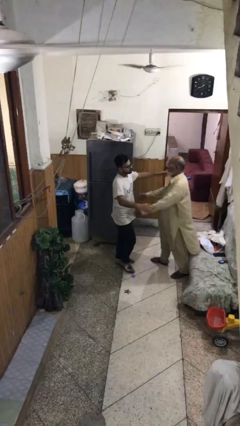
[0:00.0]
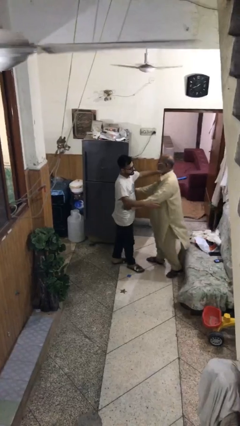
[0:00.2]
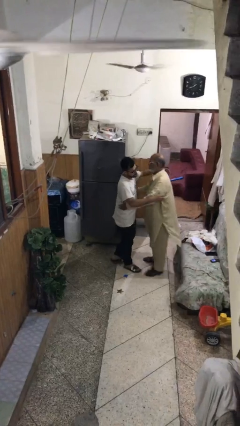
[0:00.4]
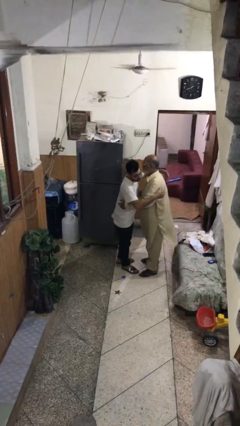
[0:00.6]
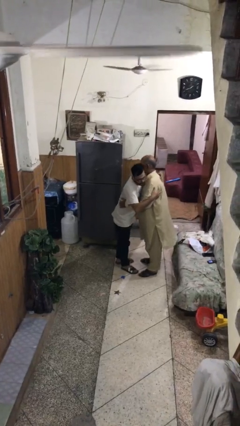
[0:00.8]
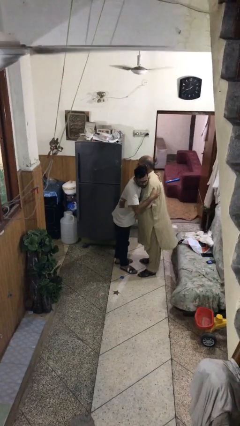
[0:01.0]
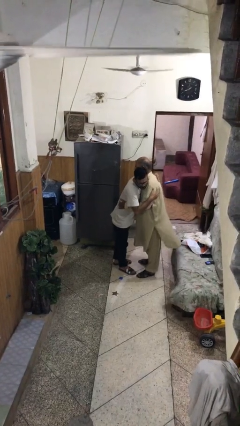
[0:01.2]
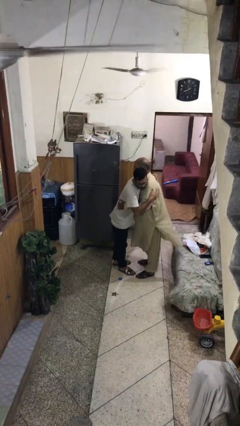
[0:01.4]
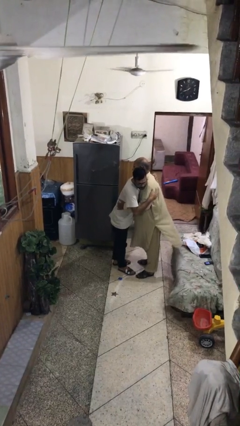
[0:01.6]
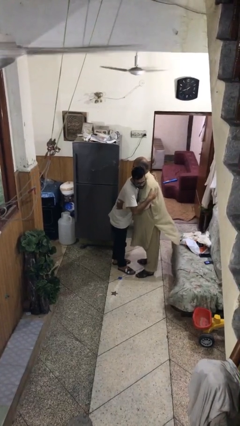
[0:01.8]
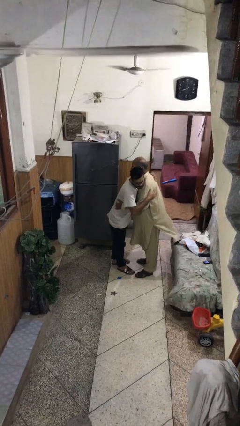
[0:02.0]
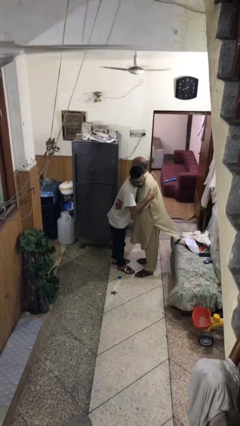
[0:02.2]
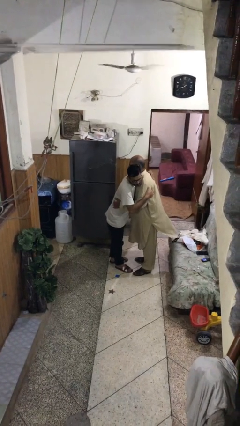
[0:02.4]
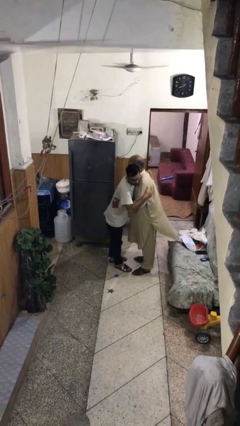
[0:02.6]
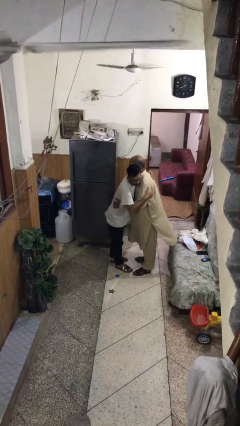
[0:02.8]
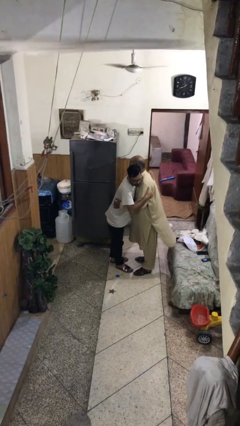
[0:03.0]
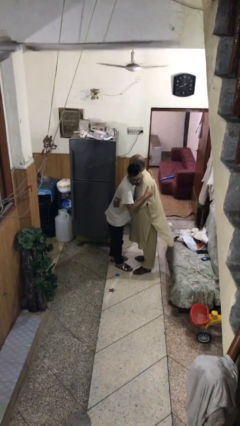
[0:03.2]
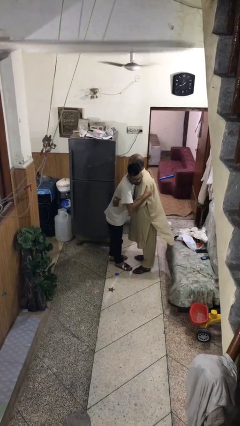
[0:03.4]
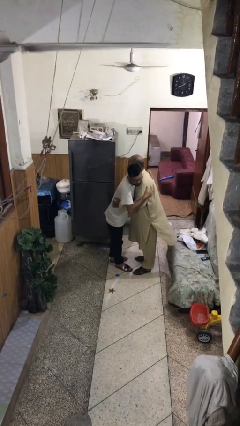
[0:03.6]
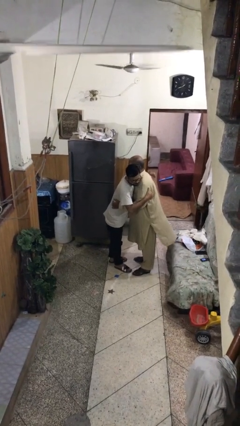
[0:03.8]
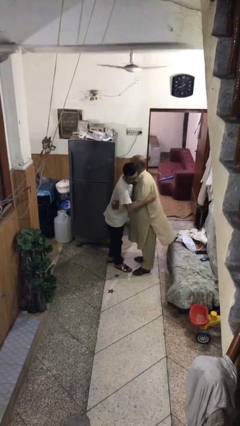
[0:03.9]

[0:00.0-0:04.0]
person embraces person

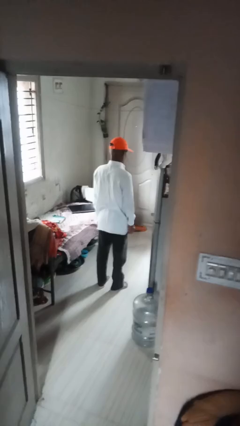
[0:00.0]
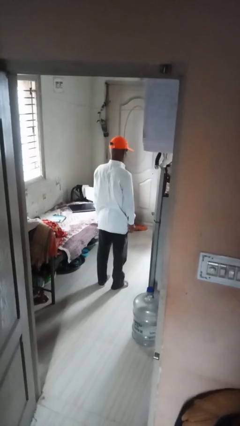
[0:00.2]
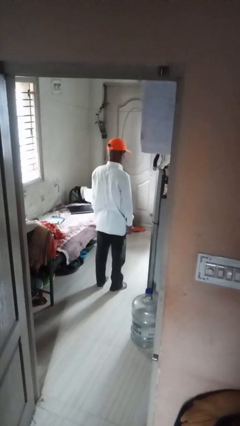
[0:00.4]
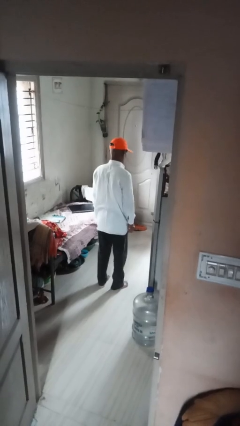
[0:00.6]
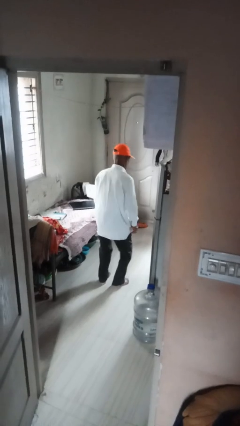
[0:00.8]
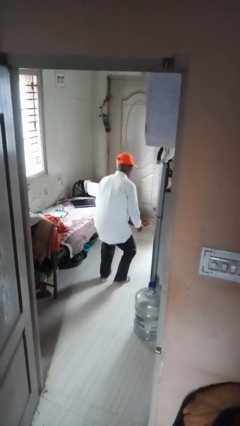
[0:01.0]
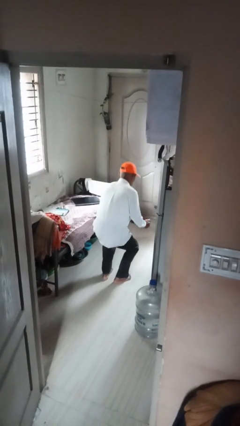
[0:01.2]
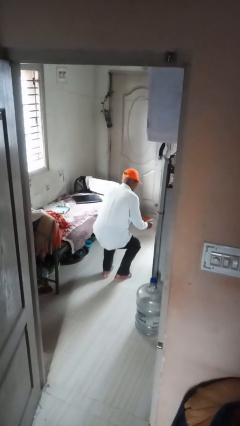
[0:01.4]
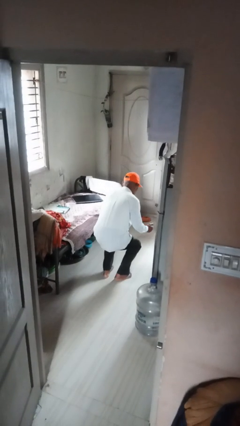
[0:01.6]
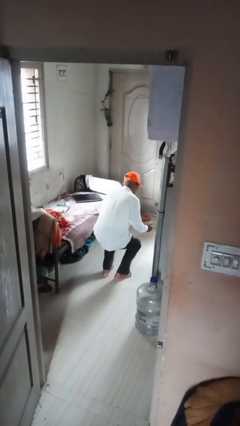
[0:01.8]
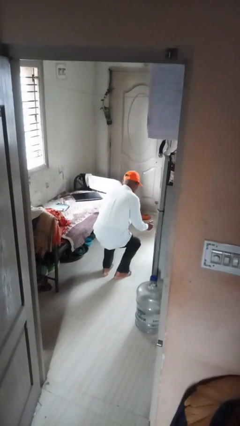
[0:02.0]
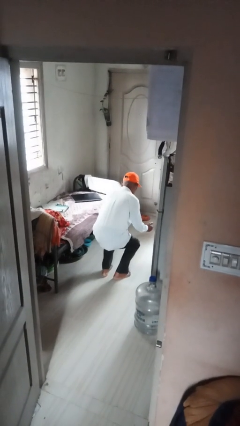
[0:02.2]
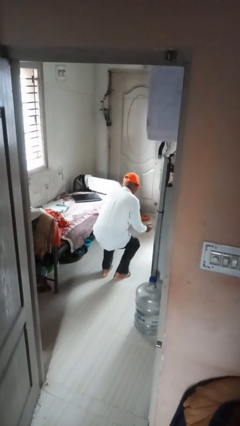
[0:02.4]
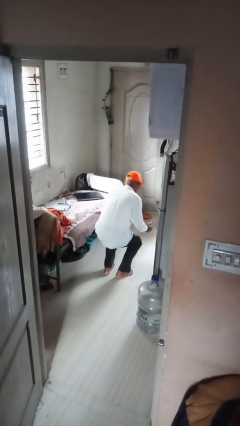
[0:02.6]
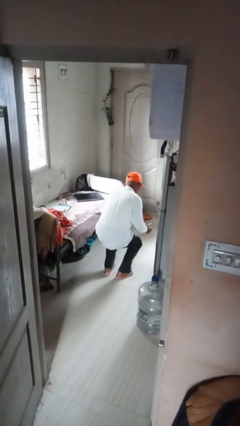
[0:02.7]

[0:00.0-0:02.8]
person squats

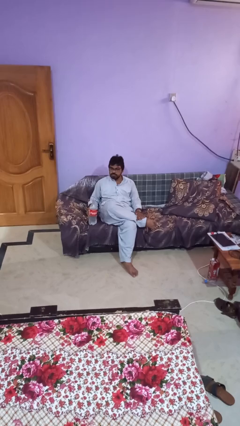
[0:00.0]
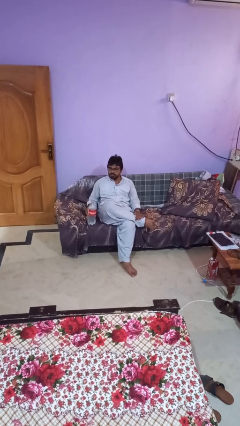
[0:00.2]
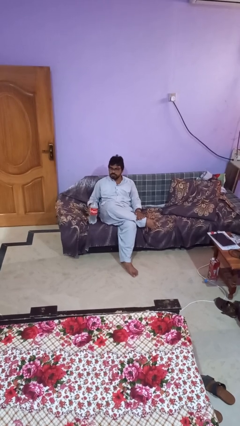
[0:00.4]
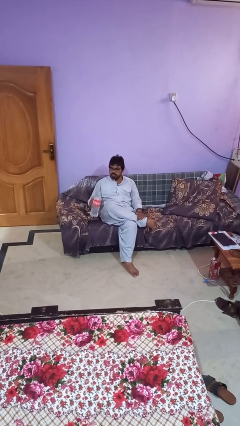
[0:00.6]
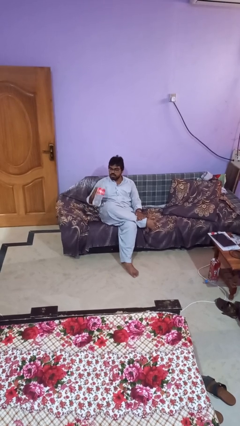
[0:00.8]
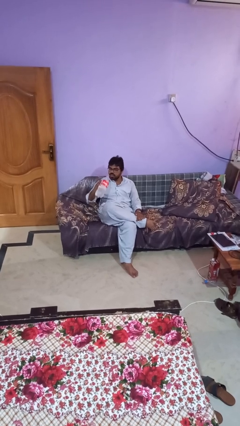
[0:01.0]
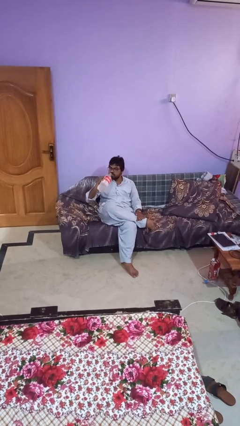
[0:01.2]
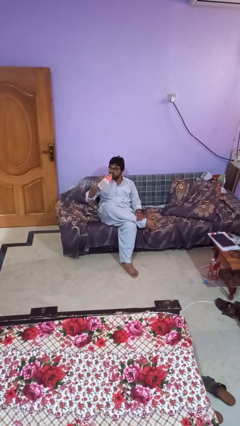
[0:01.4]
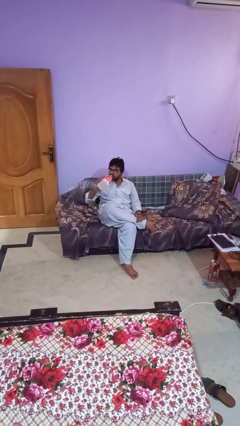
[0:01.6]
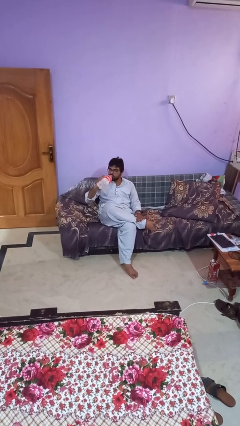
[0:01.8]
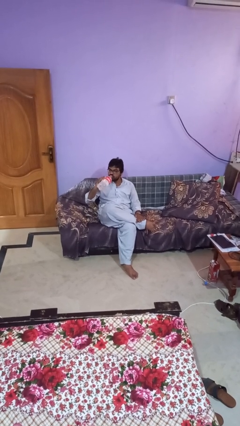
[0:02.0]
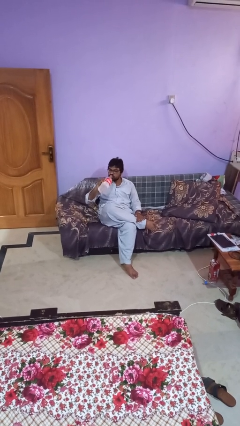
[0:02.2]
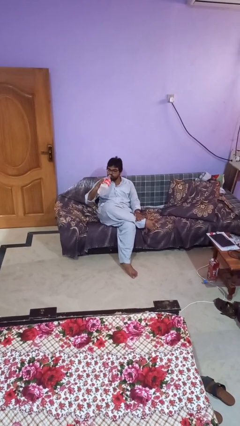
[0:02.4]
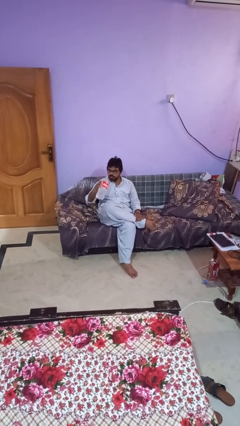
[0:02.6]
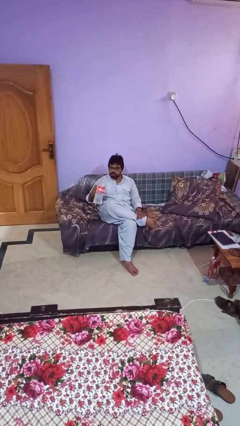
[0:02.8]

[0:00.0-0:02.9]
person drinks from bottle

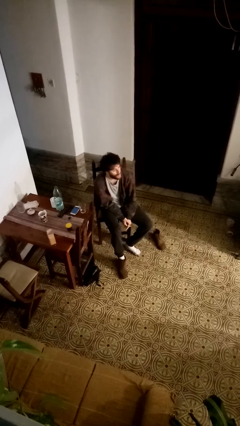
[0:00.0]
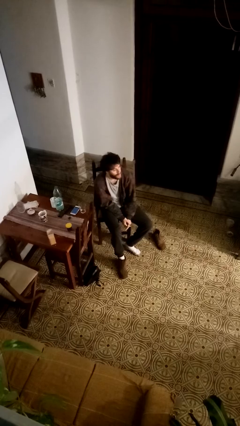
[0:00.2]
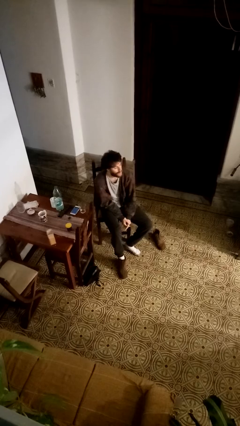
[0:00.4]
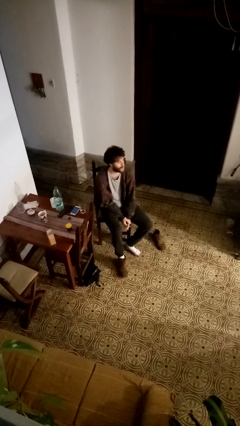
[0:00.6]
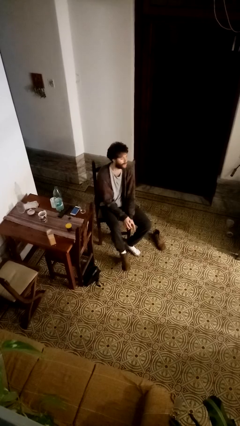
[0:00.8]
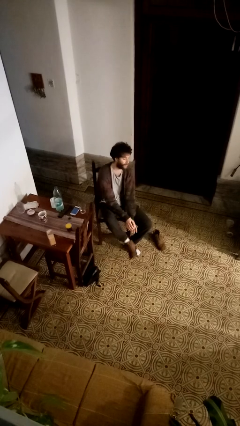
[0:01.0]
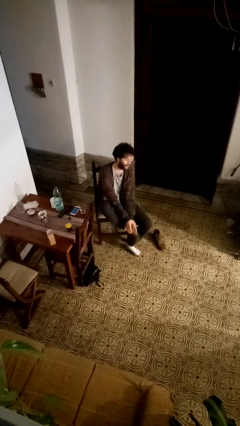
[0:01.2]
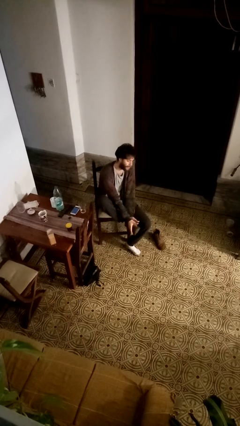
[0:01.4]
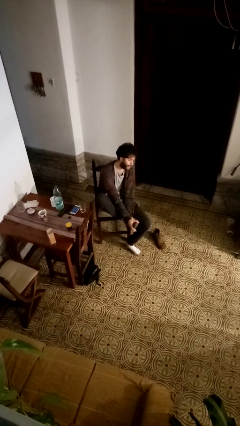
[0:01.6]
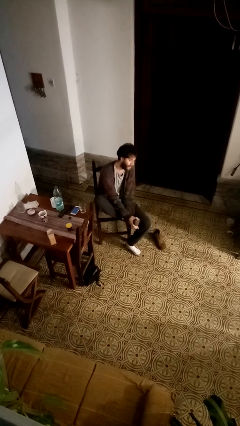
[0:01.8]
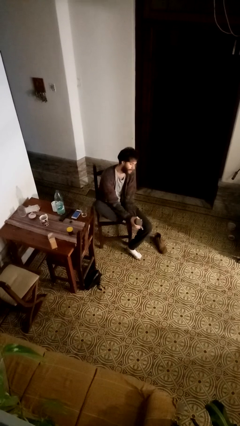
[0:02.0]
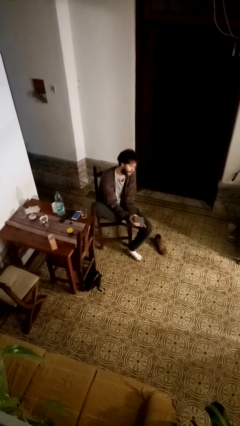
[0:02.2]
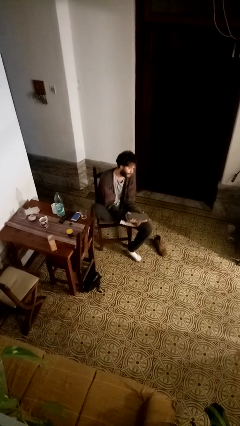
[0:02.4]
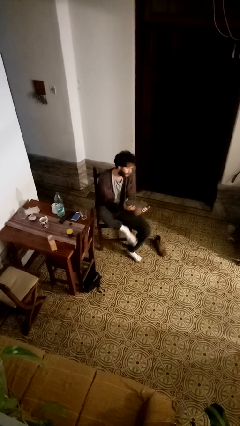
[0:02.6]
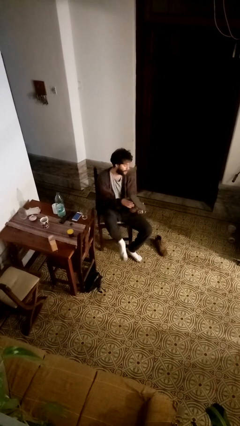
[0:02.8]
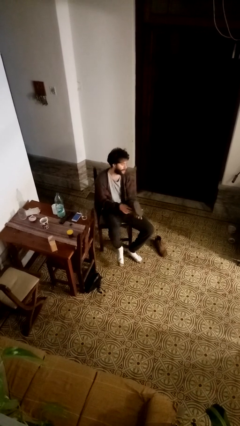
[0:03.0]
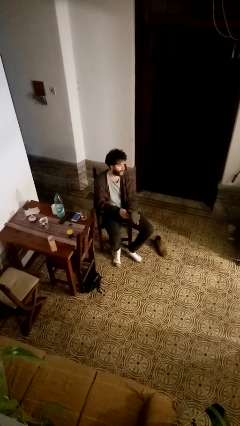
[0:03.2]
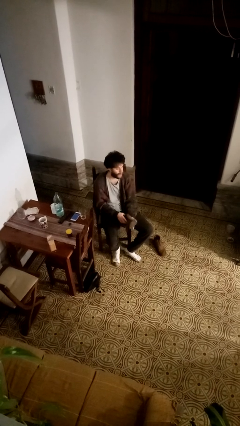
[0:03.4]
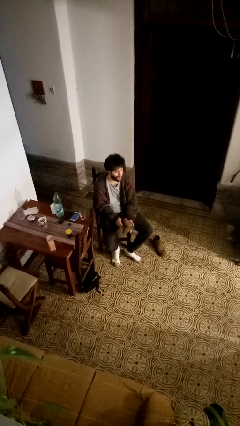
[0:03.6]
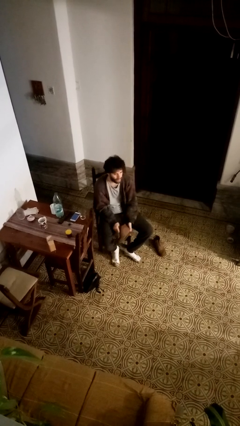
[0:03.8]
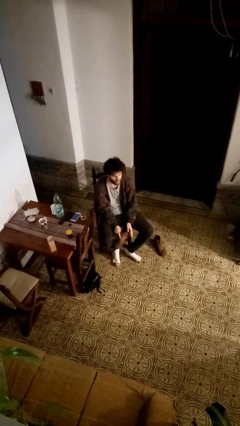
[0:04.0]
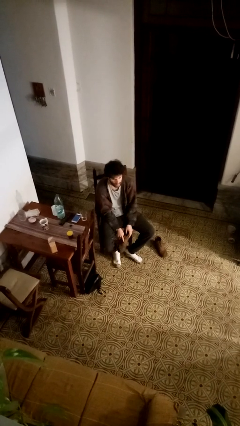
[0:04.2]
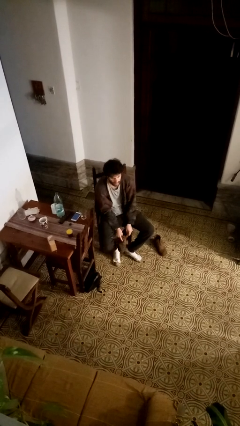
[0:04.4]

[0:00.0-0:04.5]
person takes off boots

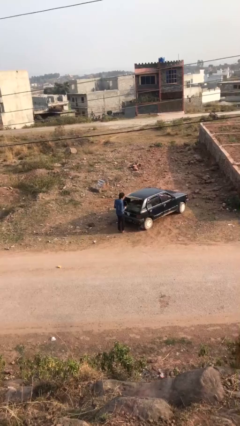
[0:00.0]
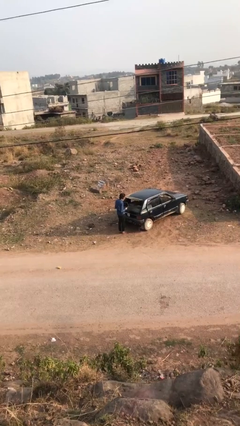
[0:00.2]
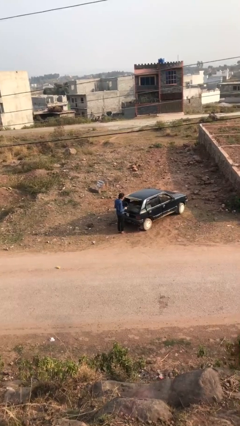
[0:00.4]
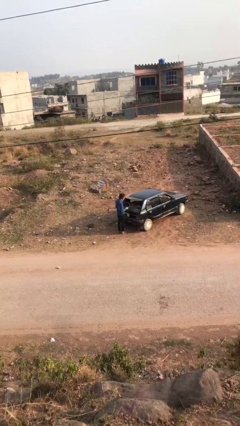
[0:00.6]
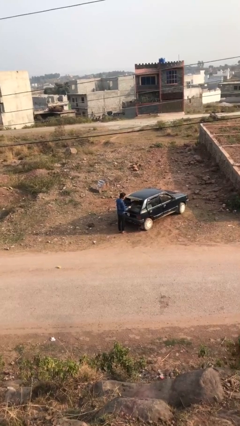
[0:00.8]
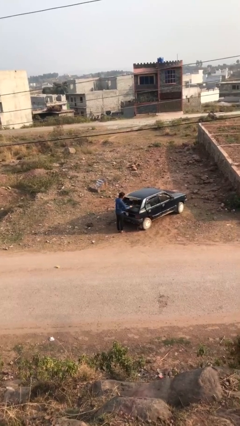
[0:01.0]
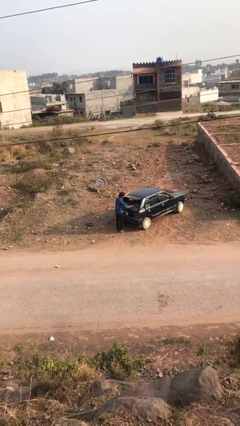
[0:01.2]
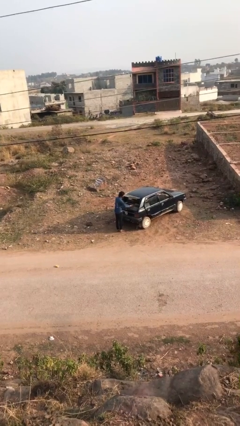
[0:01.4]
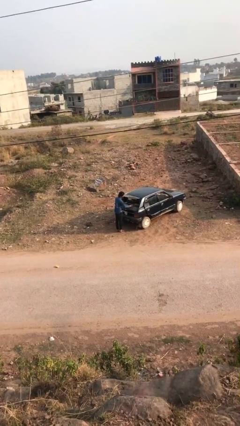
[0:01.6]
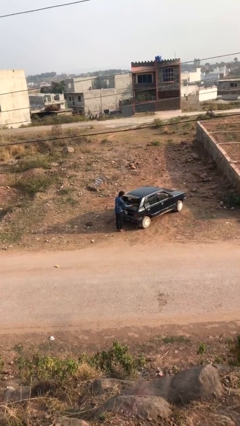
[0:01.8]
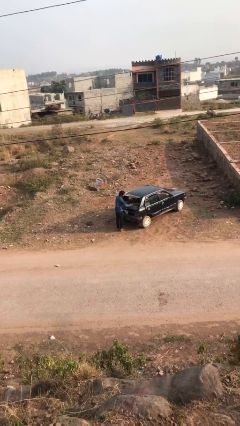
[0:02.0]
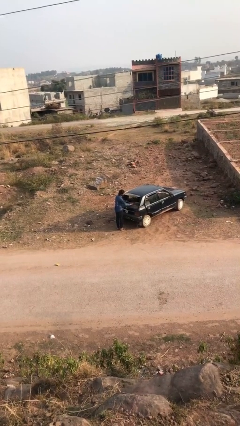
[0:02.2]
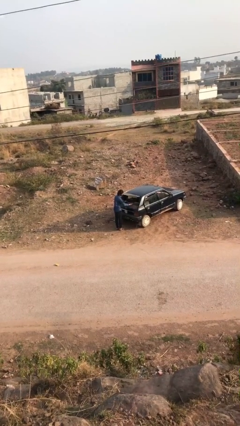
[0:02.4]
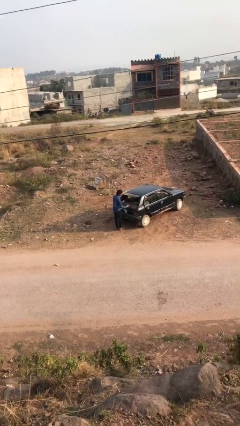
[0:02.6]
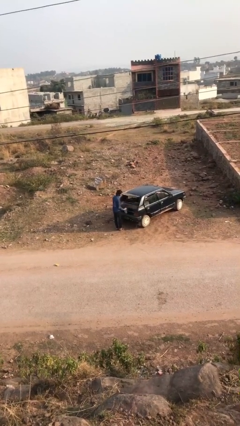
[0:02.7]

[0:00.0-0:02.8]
person loads car

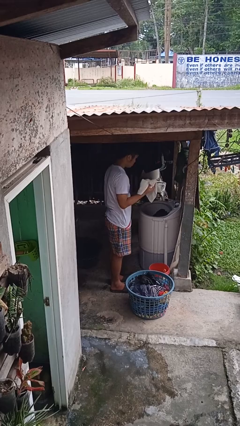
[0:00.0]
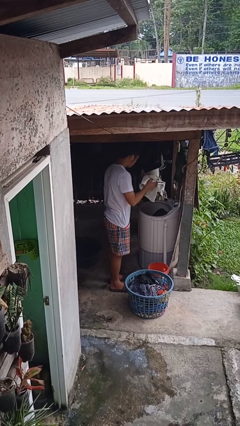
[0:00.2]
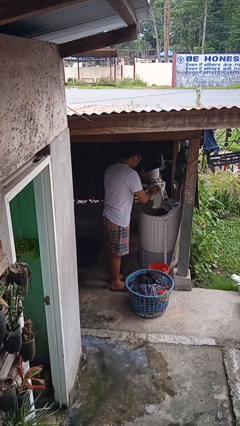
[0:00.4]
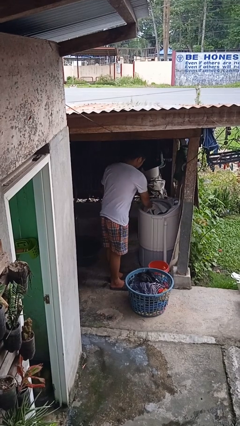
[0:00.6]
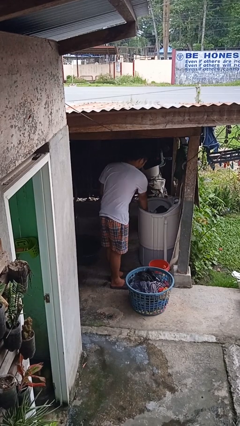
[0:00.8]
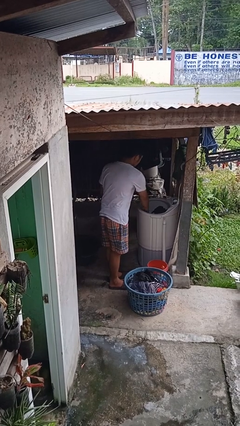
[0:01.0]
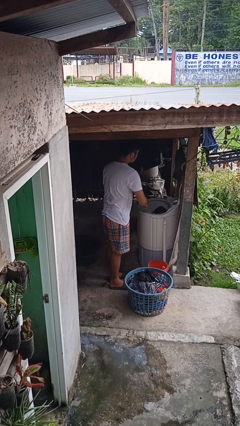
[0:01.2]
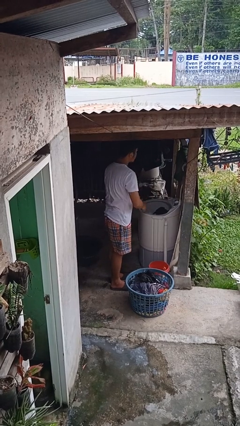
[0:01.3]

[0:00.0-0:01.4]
person loads clotheswasher
